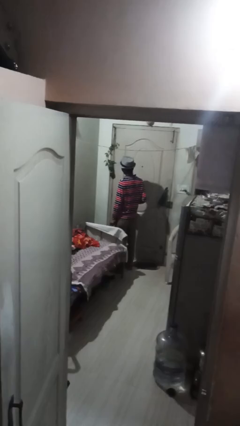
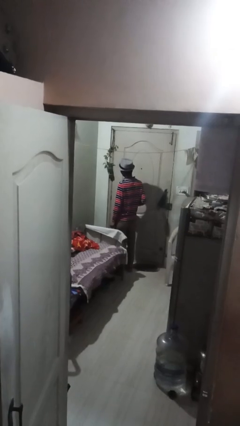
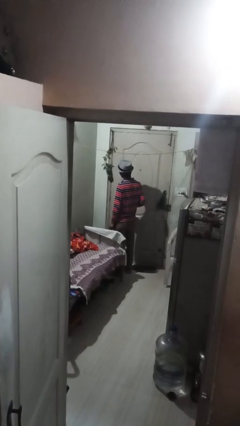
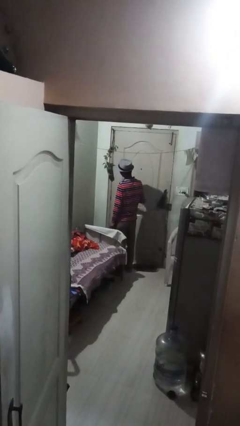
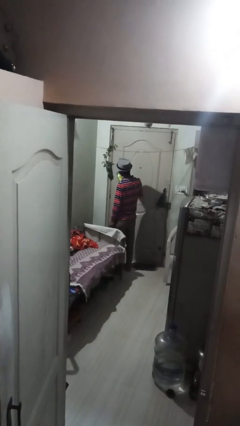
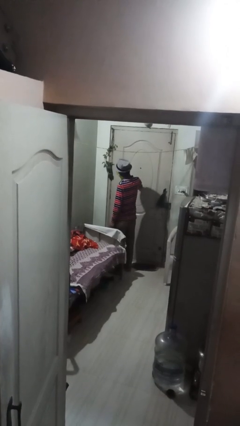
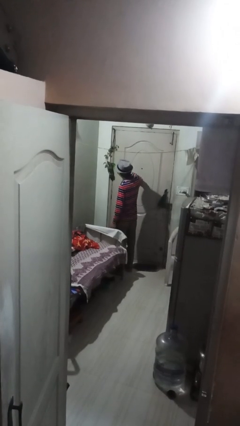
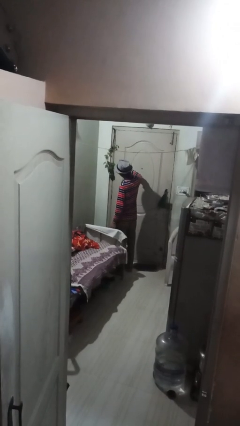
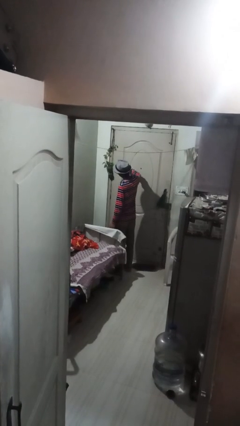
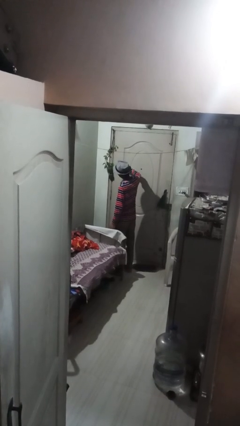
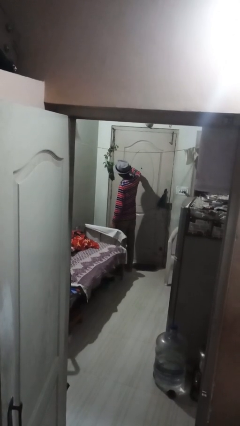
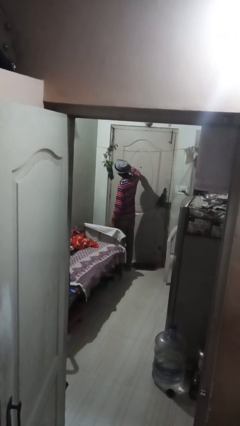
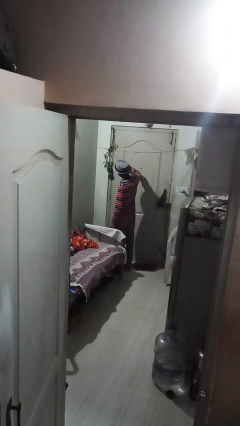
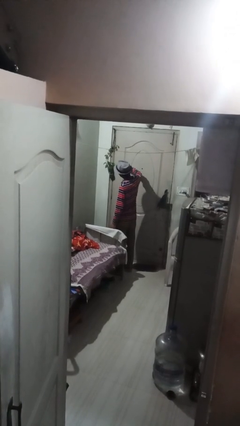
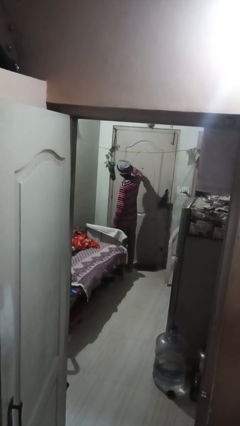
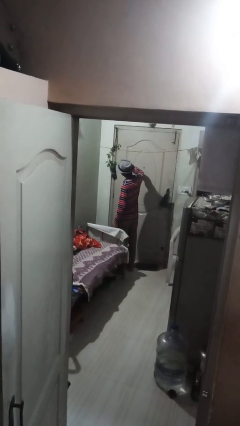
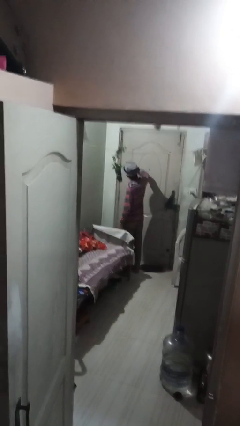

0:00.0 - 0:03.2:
person waters houseplant

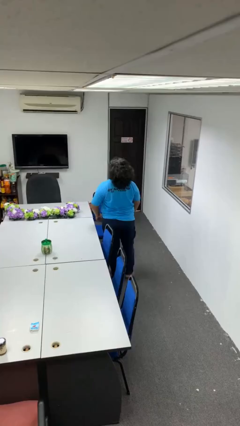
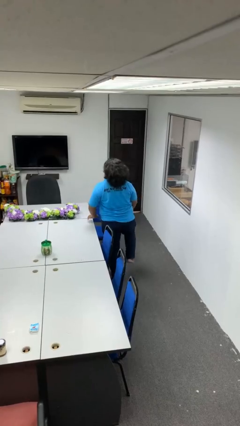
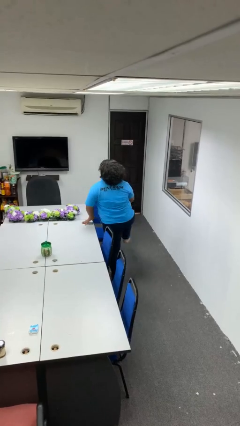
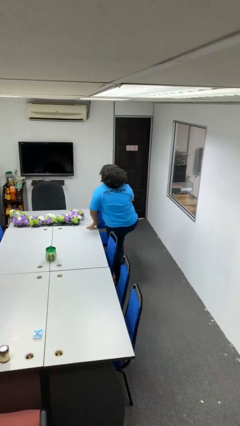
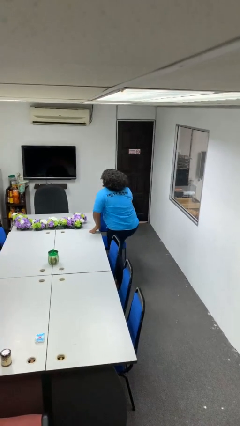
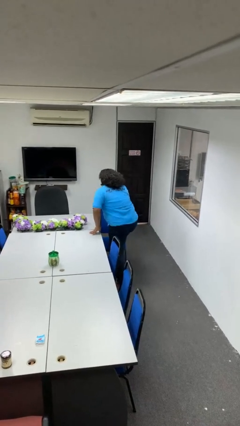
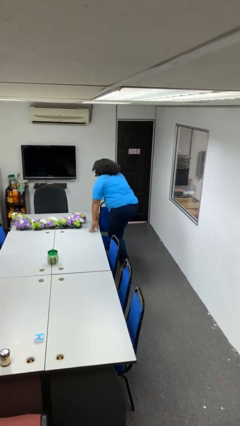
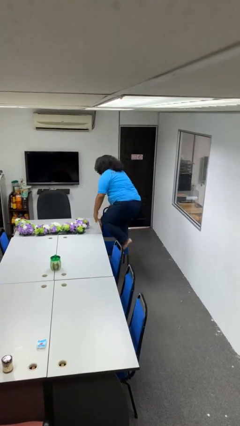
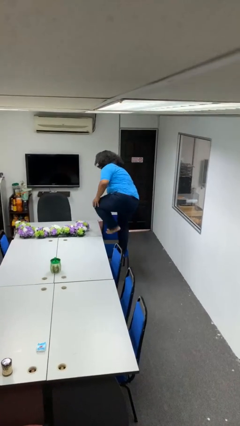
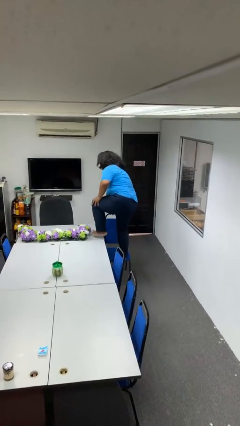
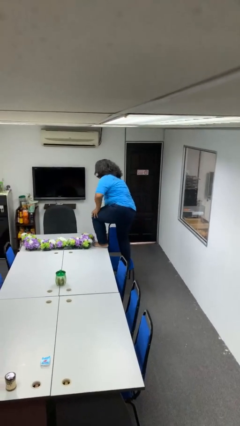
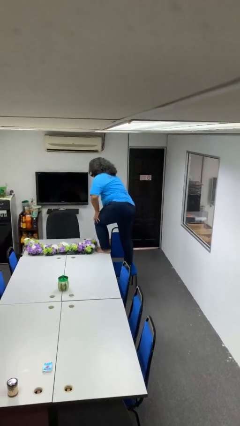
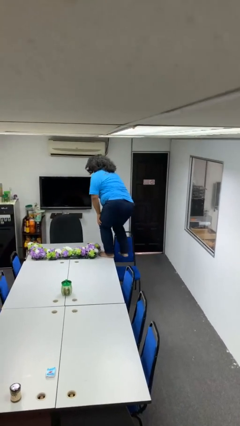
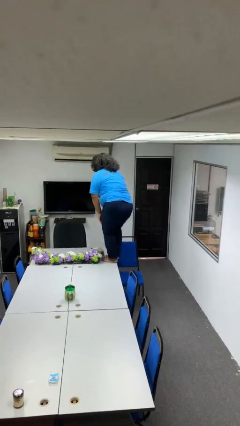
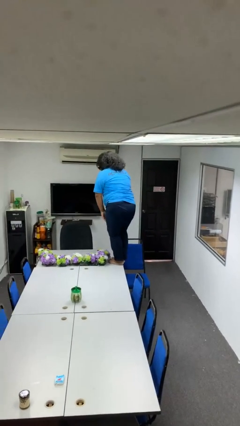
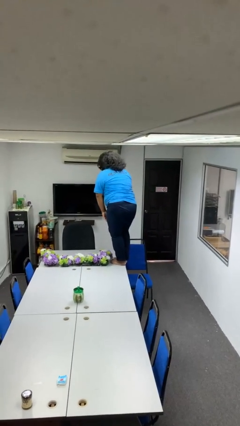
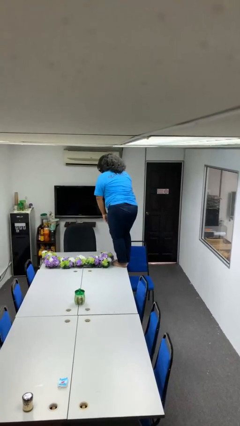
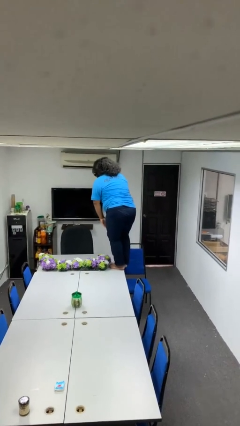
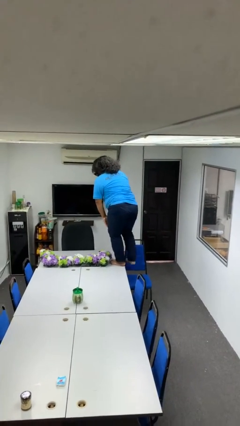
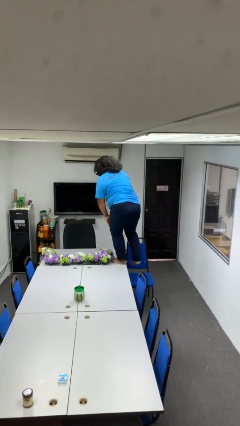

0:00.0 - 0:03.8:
person climbs on table

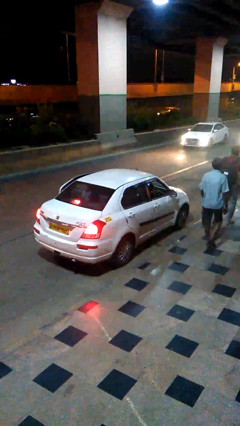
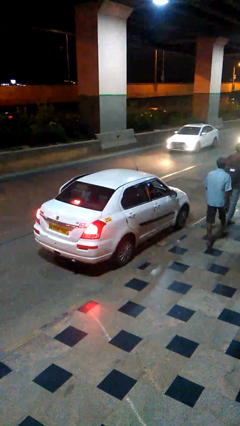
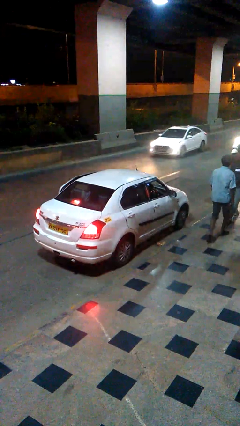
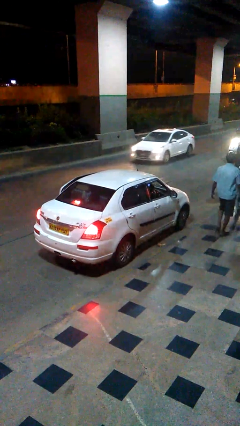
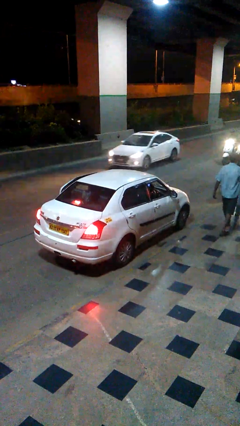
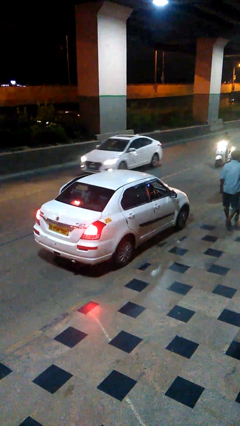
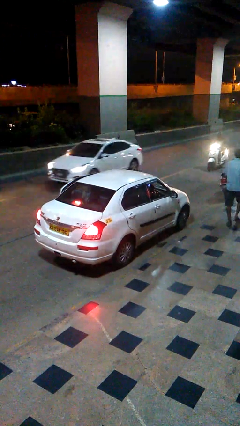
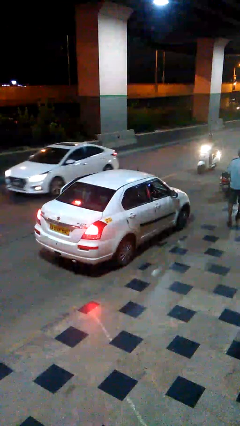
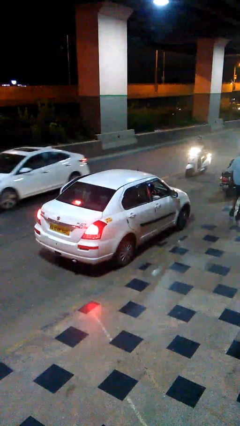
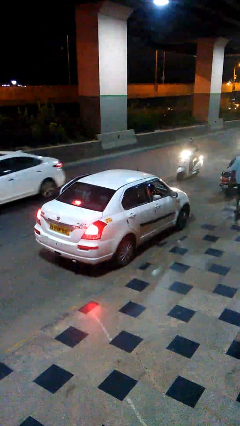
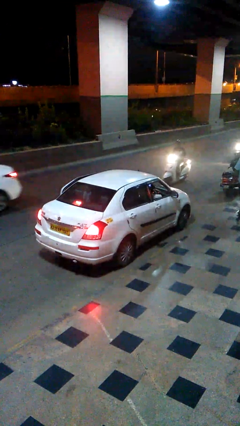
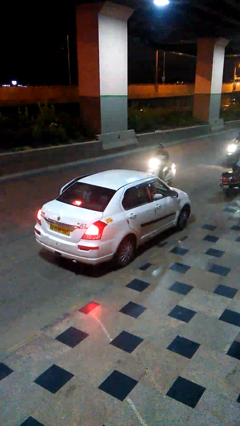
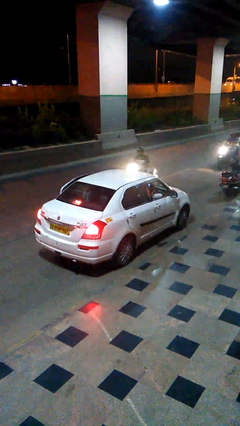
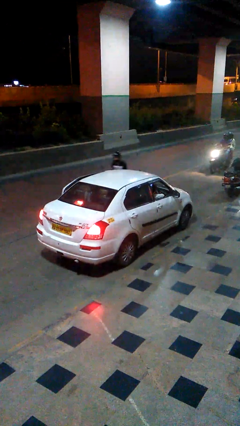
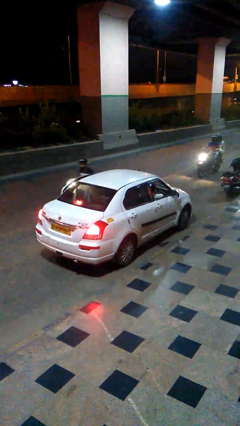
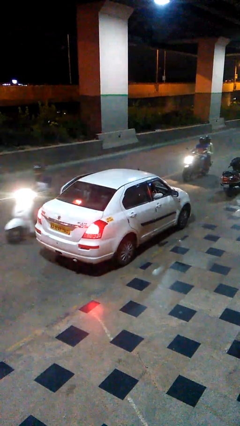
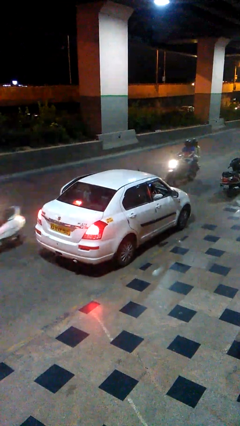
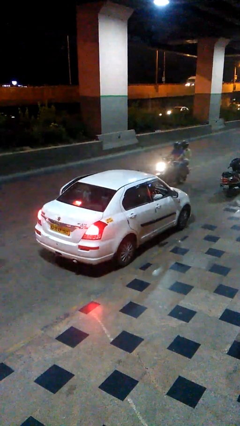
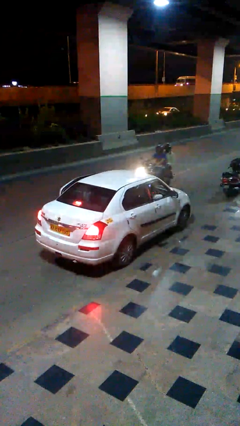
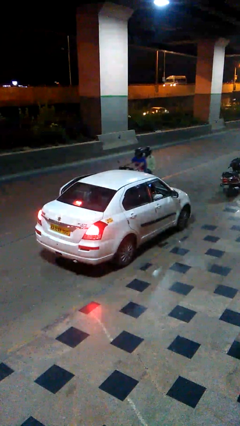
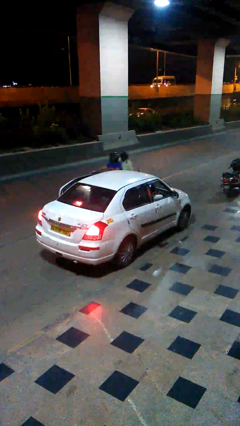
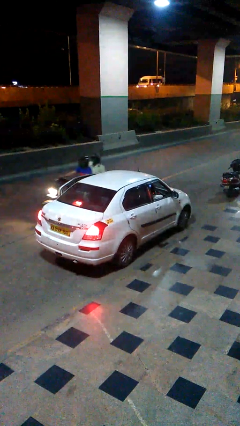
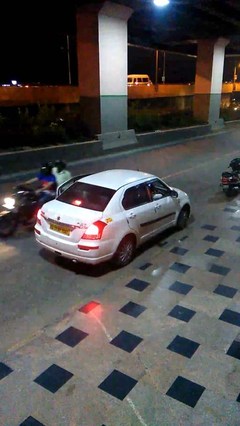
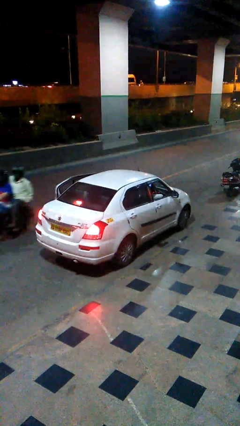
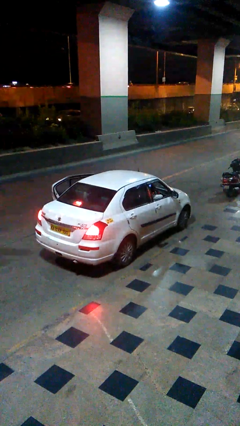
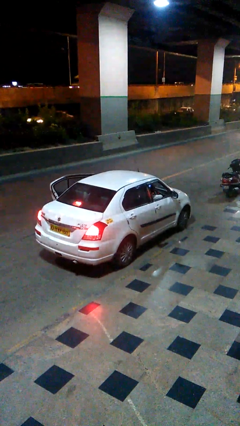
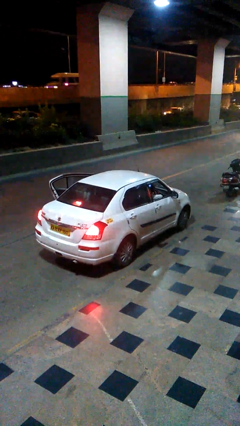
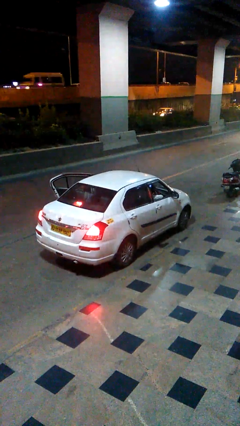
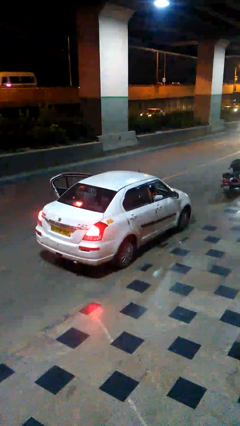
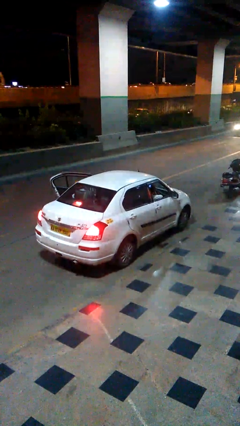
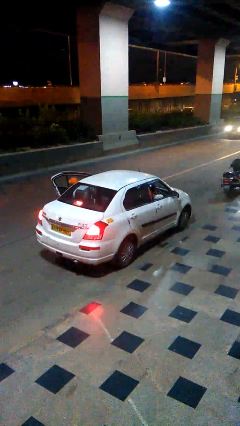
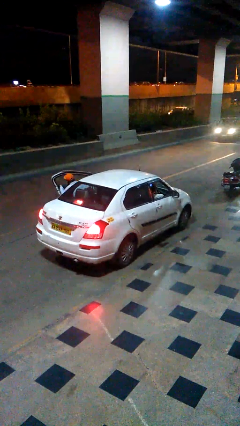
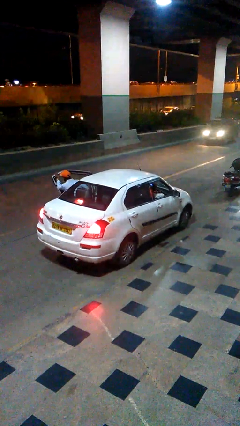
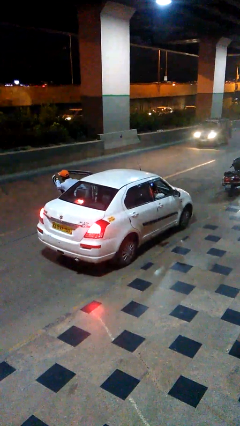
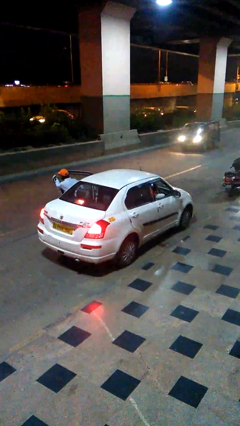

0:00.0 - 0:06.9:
car drops off person

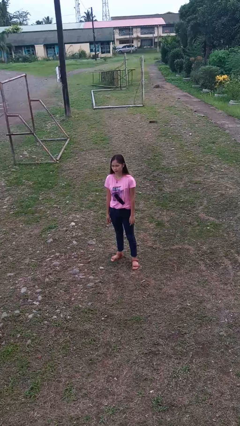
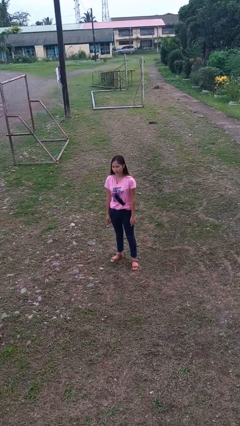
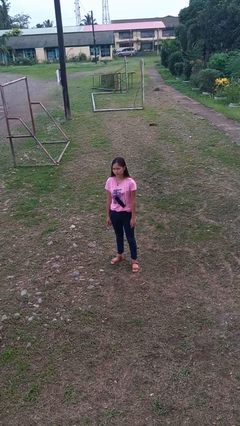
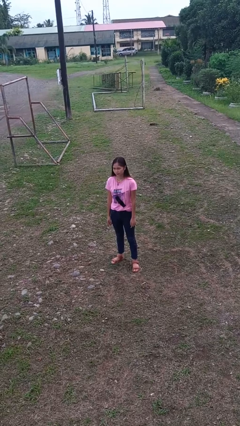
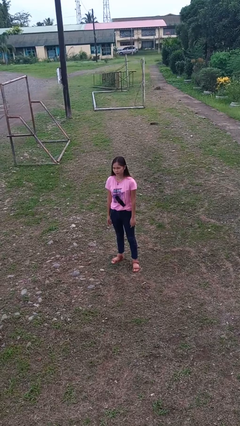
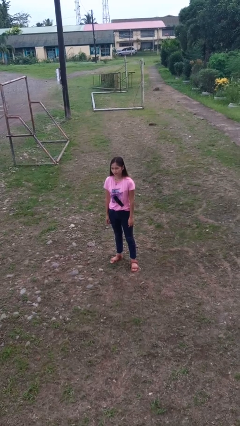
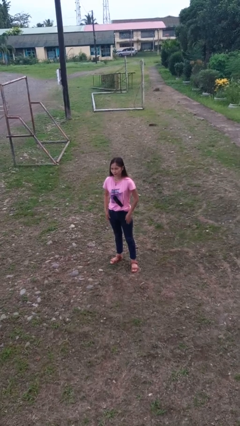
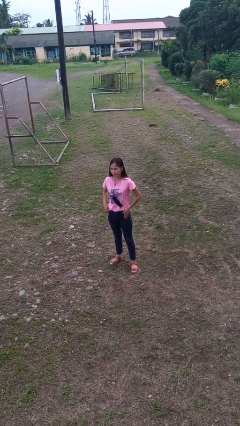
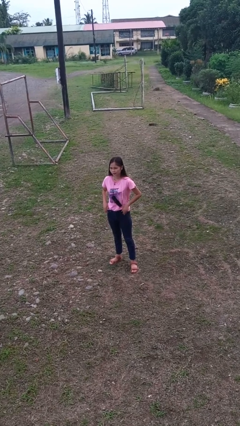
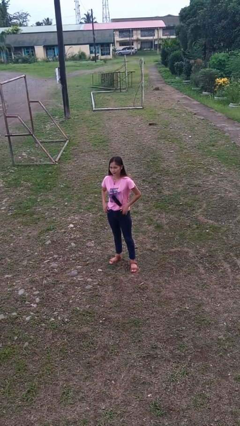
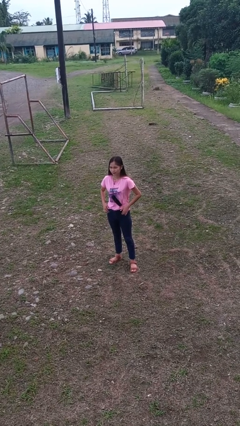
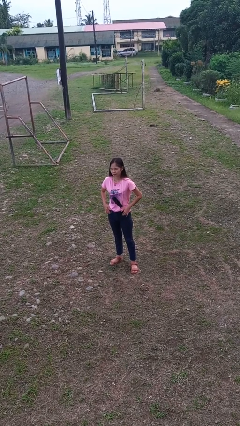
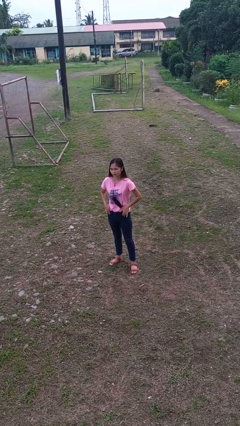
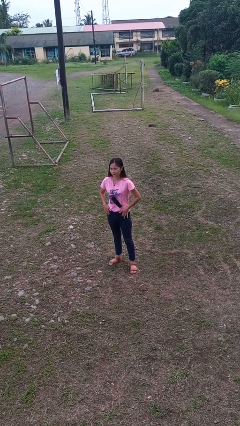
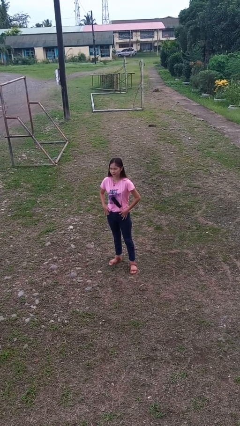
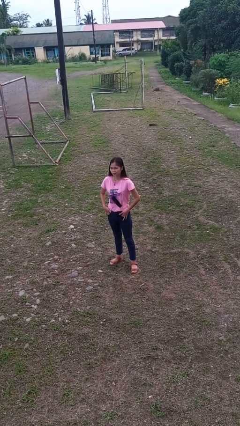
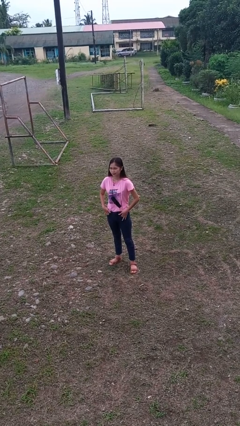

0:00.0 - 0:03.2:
person puts hands in back pockets

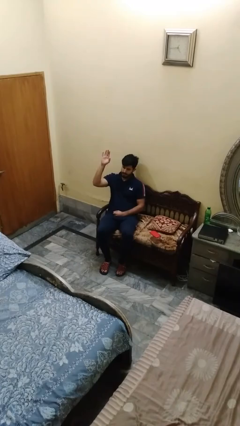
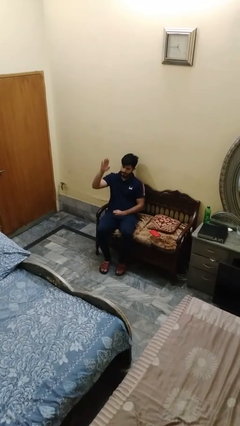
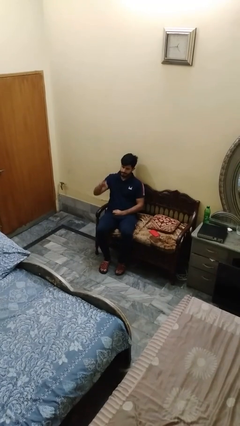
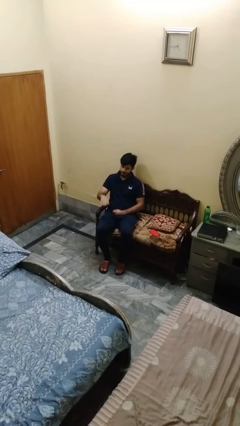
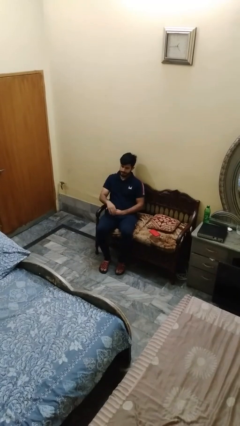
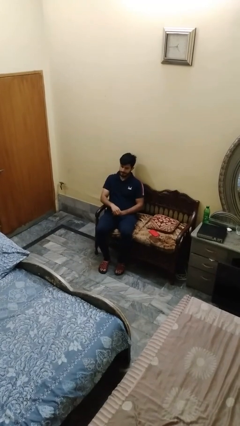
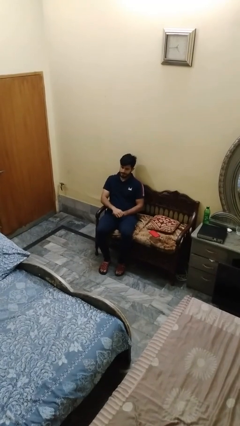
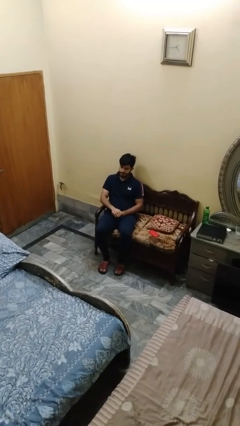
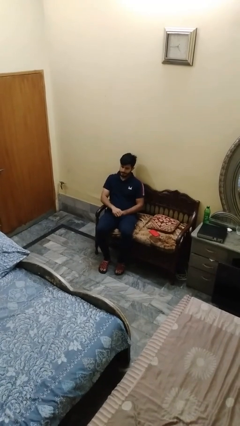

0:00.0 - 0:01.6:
person gestures lower hand
